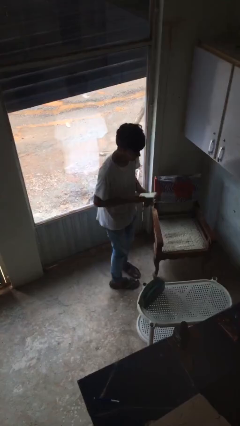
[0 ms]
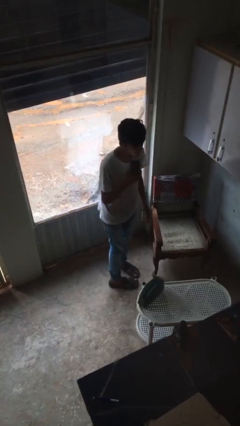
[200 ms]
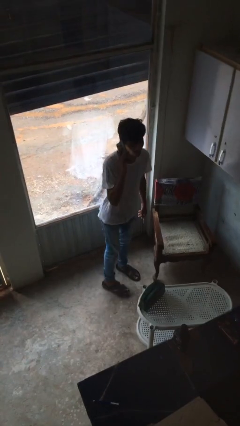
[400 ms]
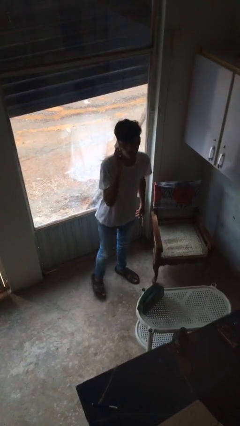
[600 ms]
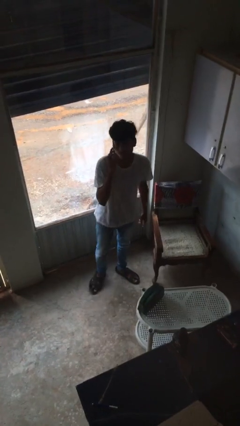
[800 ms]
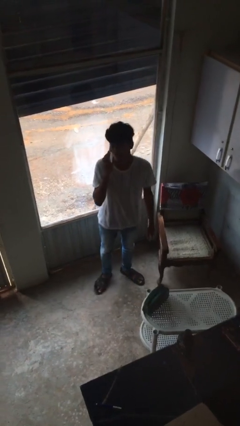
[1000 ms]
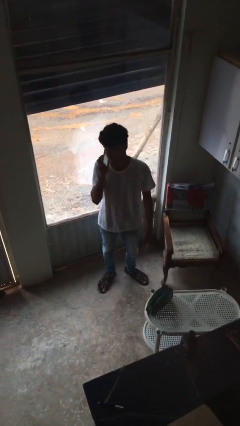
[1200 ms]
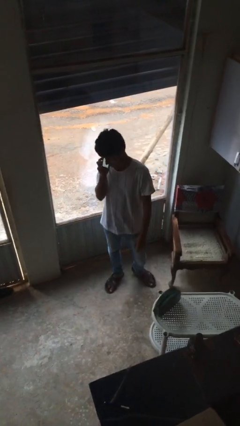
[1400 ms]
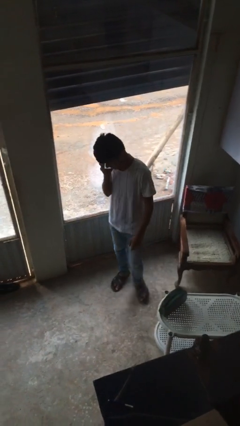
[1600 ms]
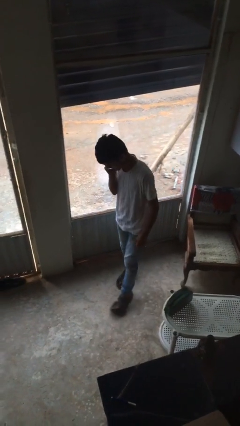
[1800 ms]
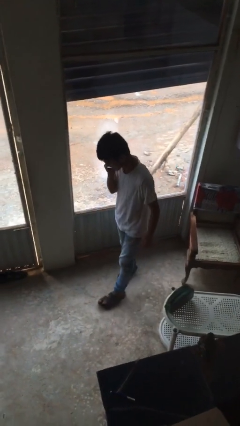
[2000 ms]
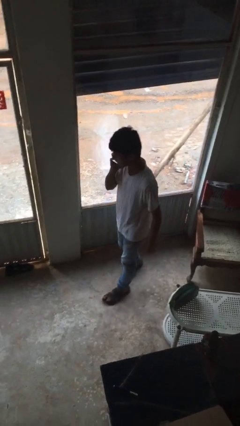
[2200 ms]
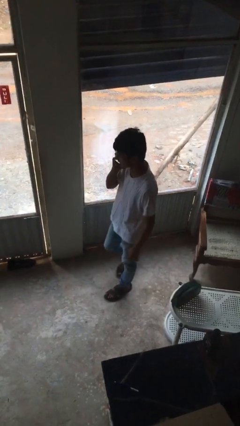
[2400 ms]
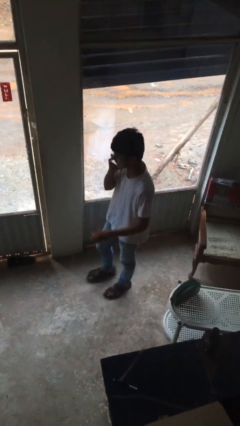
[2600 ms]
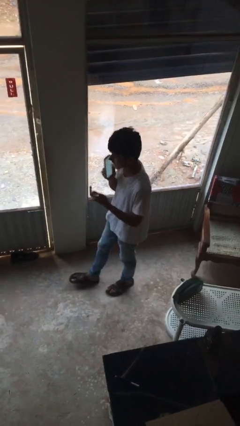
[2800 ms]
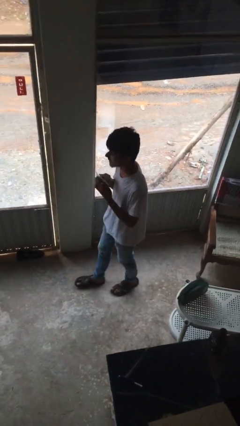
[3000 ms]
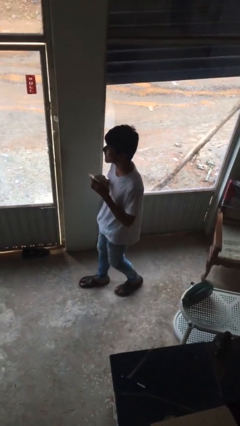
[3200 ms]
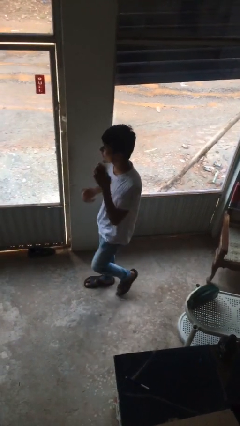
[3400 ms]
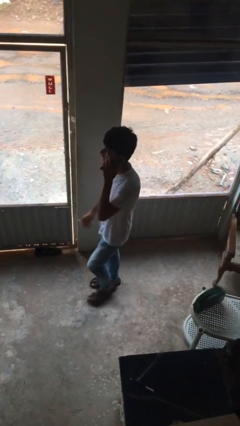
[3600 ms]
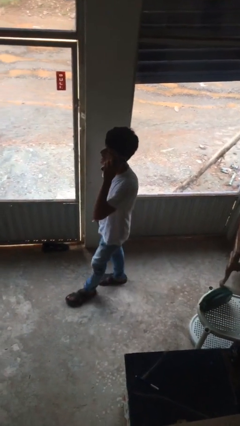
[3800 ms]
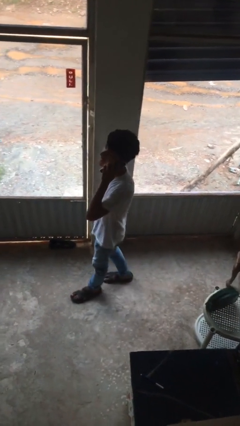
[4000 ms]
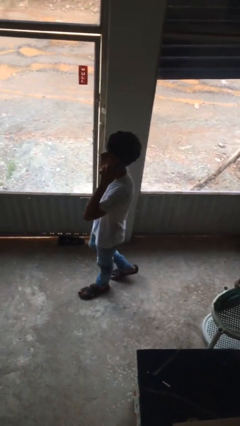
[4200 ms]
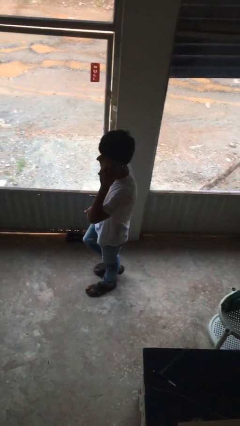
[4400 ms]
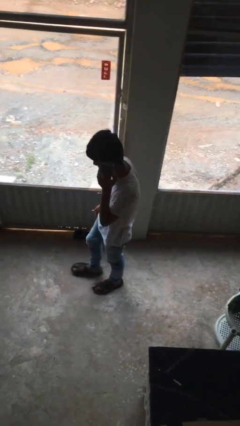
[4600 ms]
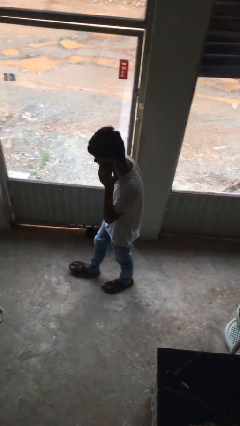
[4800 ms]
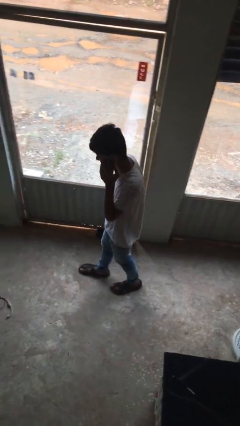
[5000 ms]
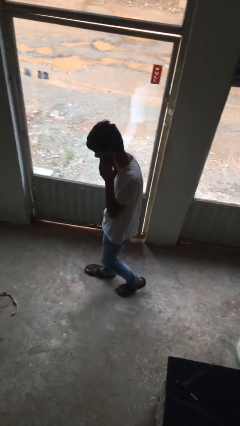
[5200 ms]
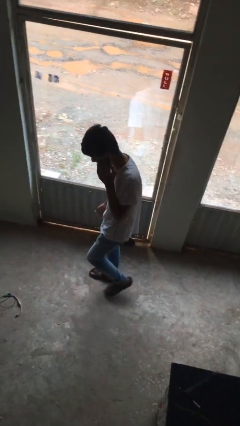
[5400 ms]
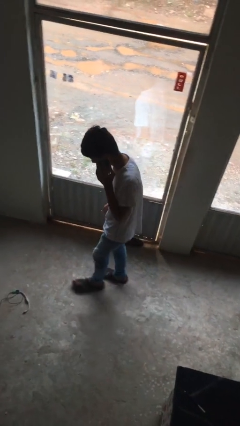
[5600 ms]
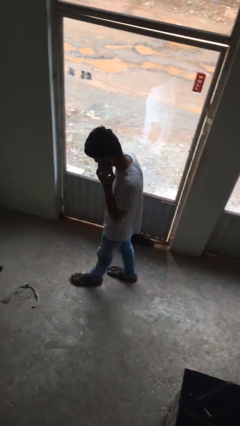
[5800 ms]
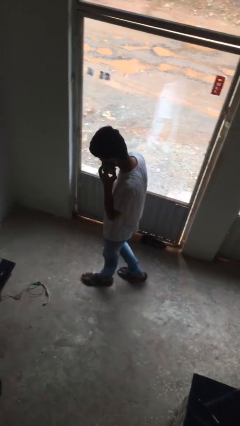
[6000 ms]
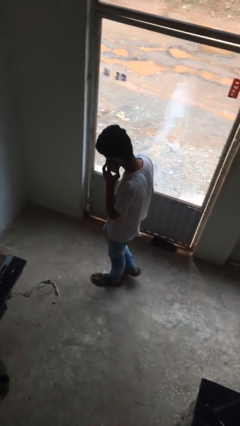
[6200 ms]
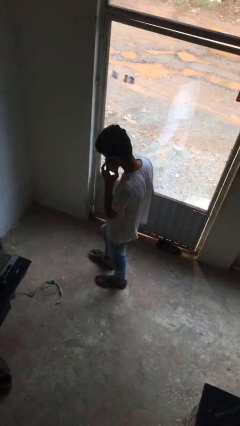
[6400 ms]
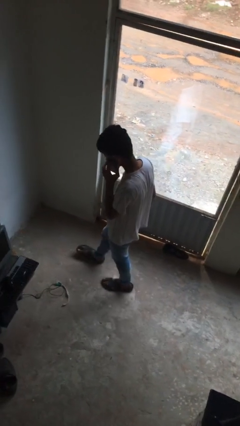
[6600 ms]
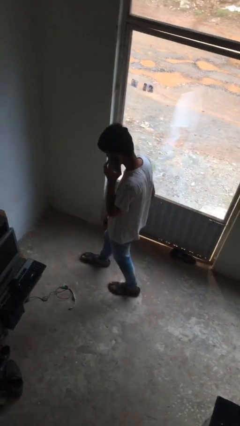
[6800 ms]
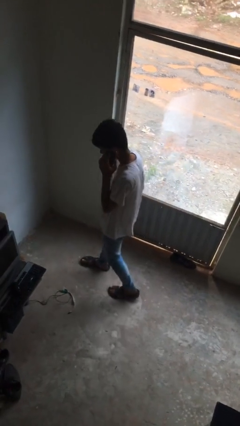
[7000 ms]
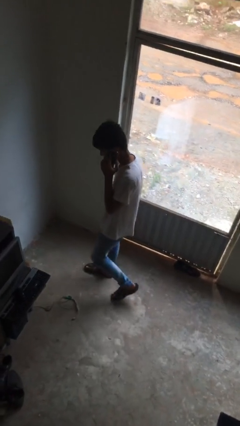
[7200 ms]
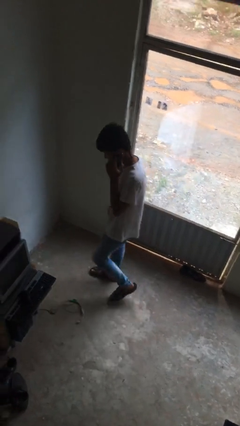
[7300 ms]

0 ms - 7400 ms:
person talks on phone

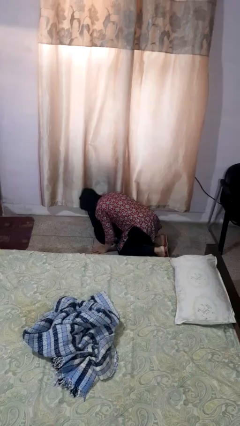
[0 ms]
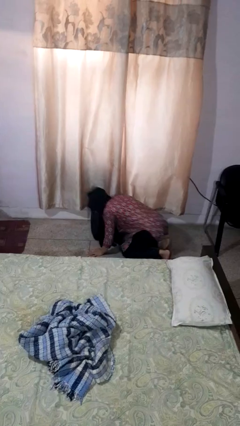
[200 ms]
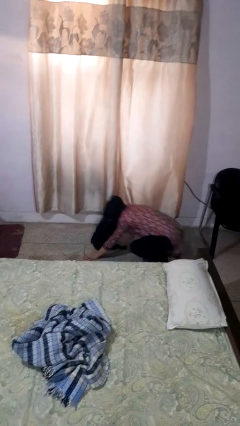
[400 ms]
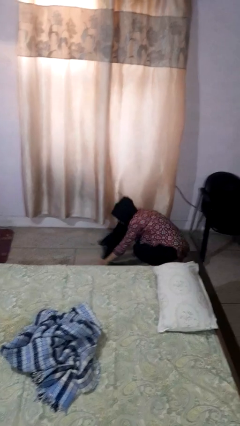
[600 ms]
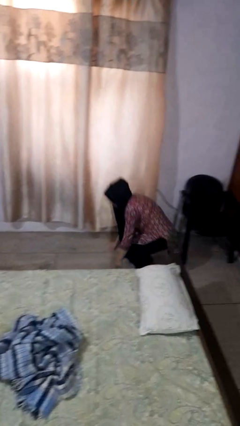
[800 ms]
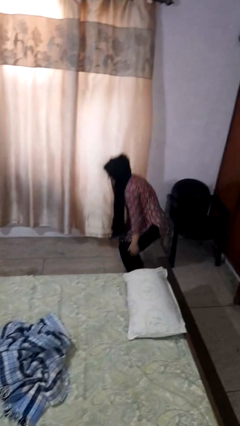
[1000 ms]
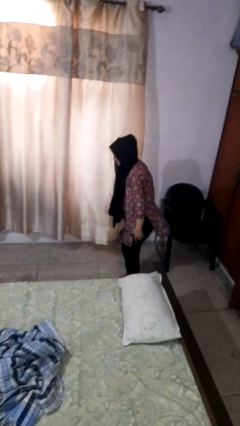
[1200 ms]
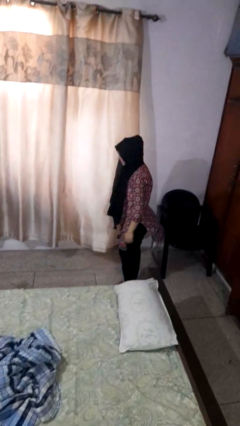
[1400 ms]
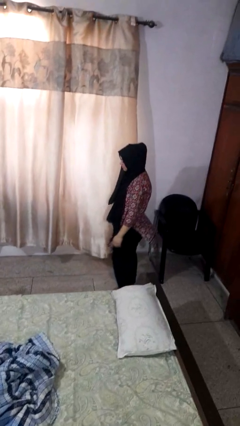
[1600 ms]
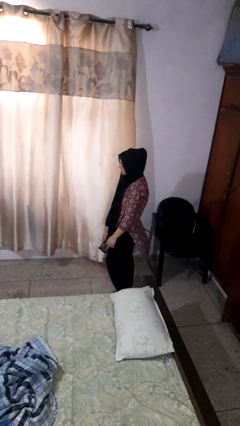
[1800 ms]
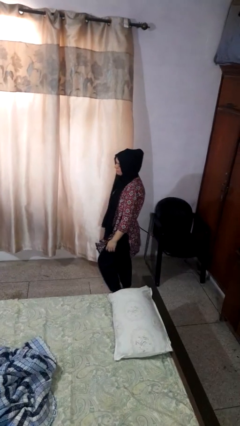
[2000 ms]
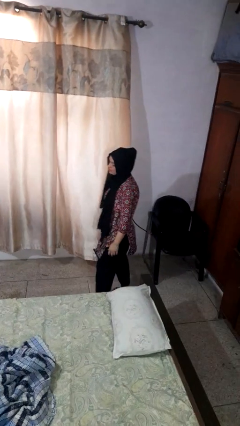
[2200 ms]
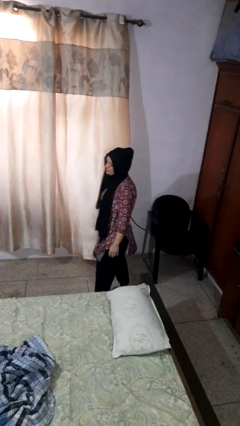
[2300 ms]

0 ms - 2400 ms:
person stands up from floor

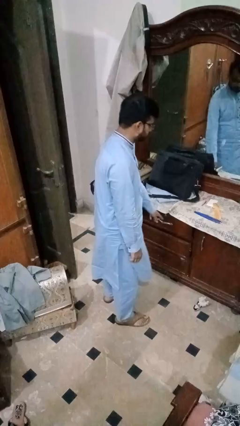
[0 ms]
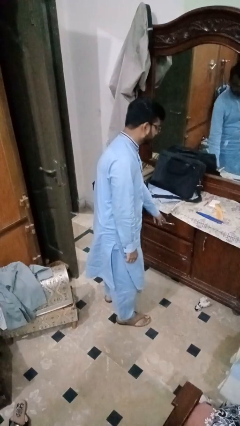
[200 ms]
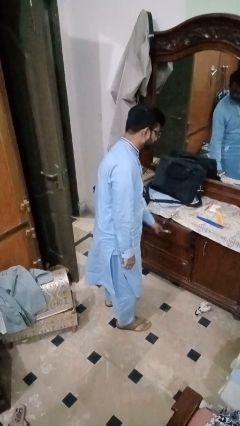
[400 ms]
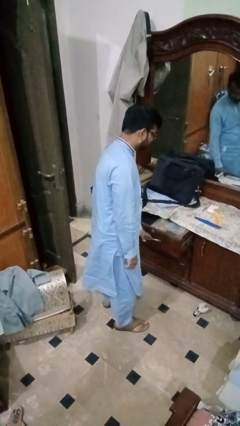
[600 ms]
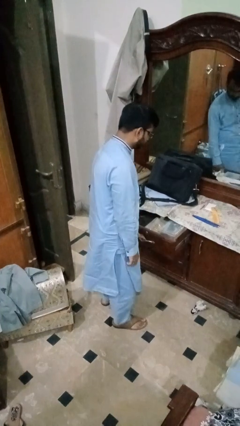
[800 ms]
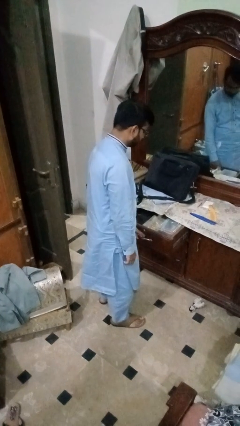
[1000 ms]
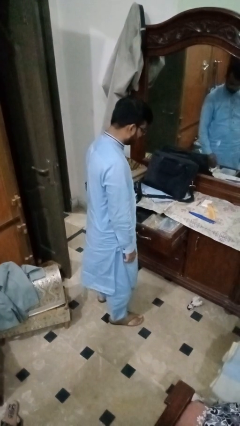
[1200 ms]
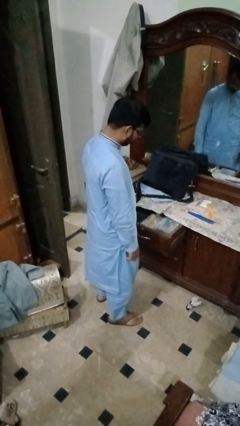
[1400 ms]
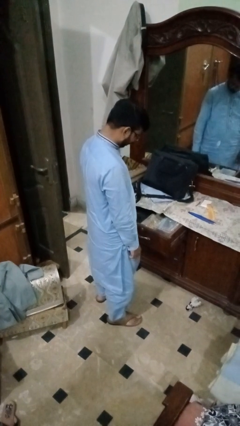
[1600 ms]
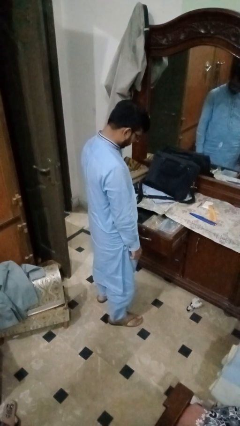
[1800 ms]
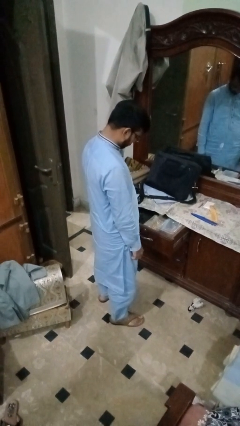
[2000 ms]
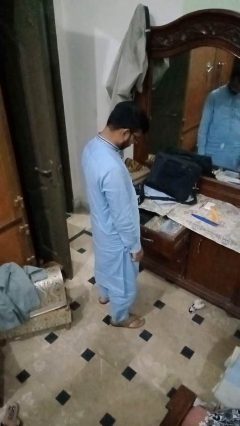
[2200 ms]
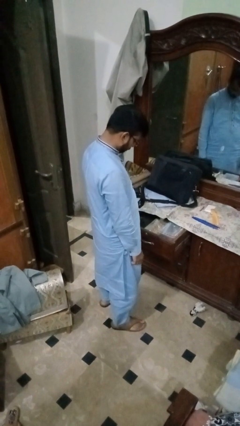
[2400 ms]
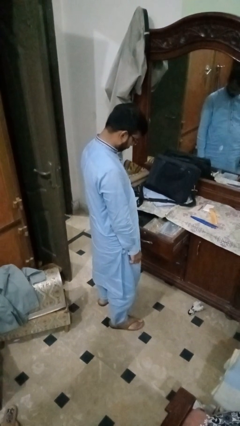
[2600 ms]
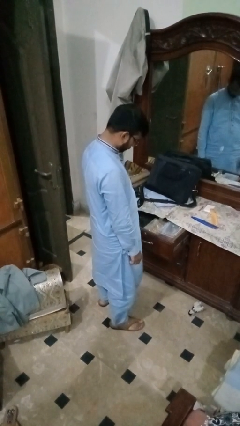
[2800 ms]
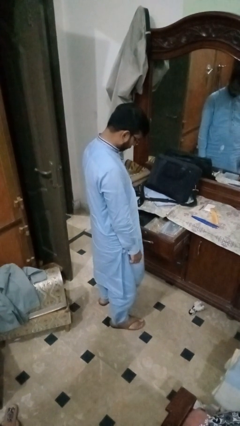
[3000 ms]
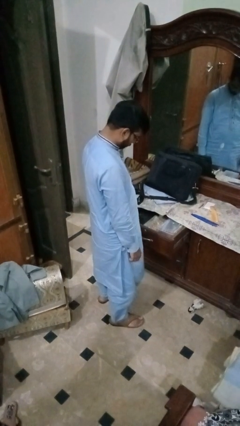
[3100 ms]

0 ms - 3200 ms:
person opens dresser drawer

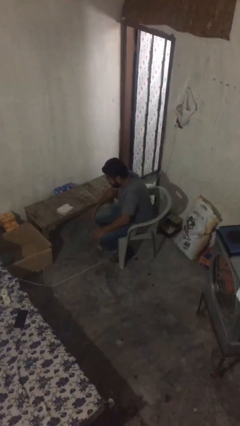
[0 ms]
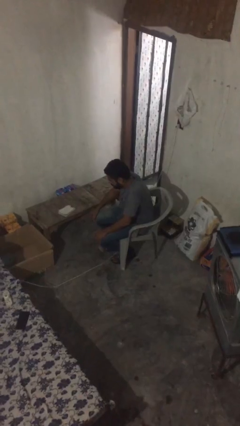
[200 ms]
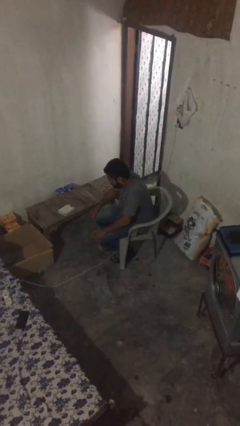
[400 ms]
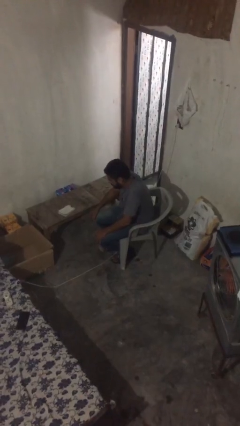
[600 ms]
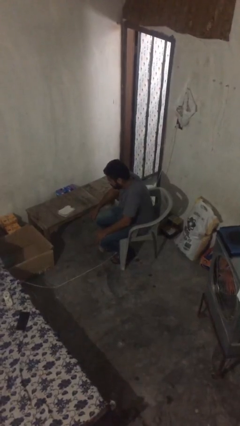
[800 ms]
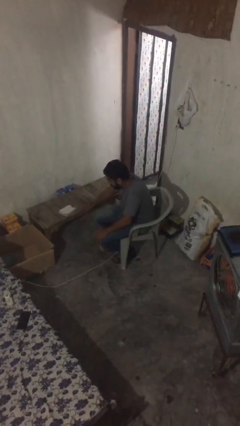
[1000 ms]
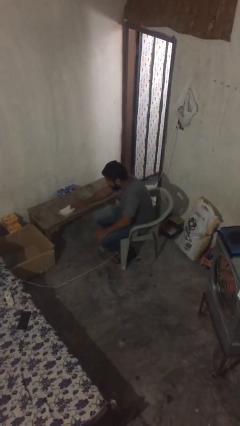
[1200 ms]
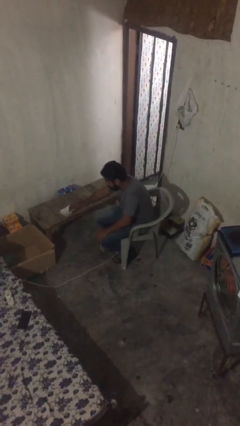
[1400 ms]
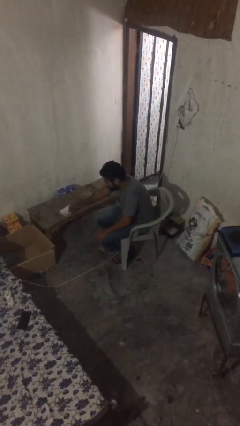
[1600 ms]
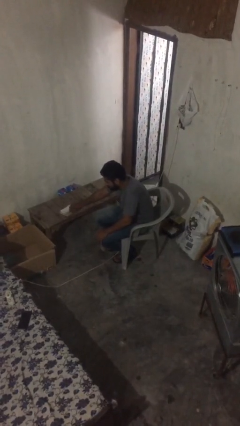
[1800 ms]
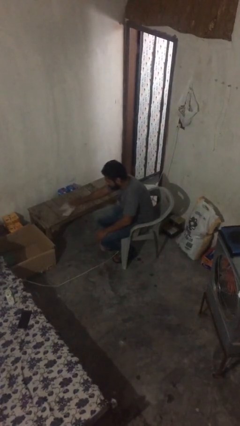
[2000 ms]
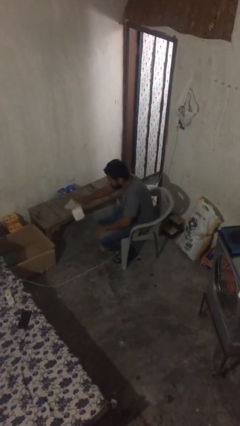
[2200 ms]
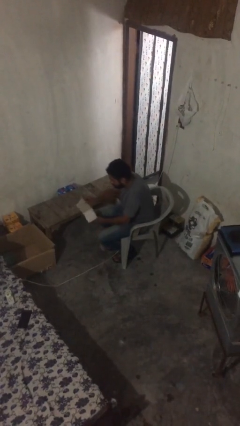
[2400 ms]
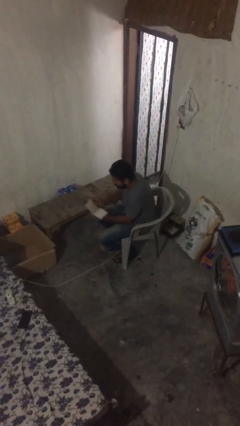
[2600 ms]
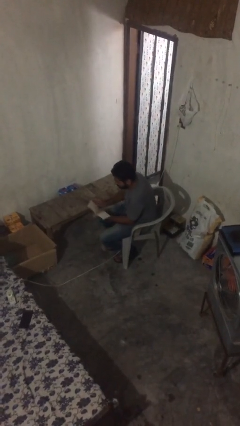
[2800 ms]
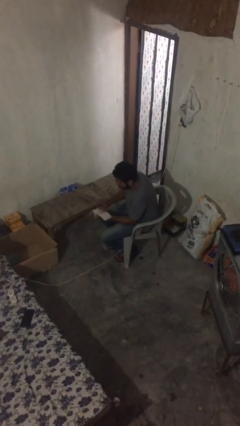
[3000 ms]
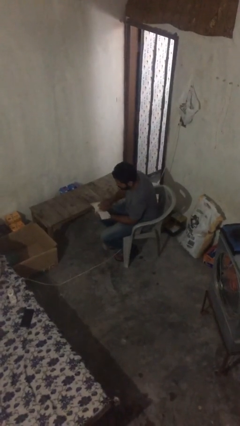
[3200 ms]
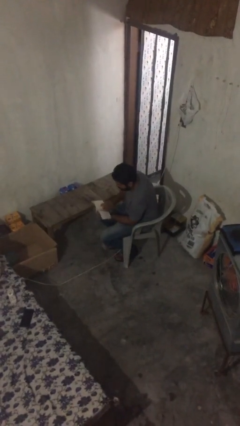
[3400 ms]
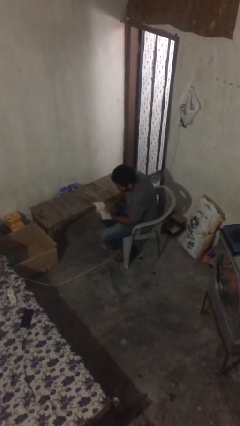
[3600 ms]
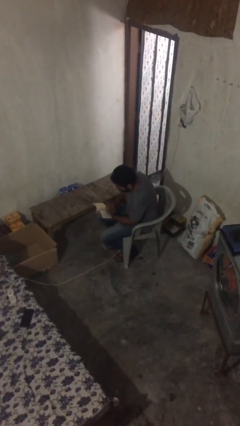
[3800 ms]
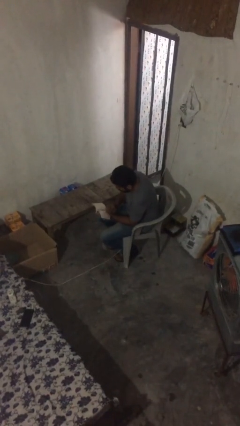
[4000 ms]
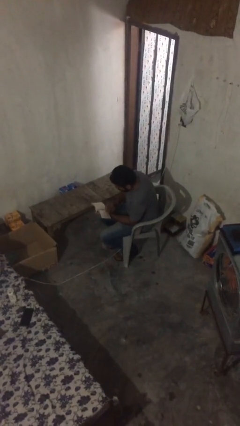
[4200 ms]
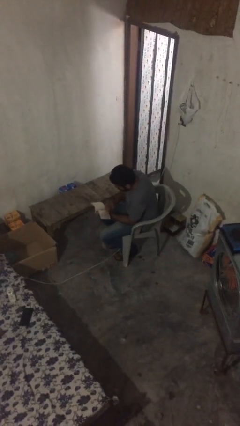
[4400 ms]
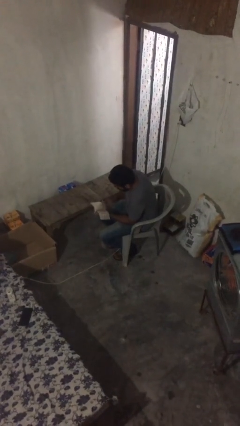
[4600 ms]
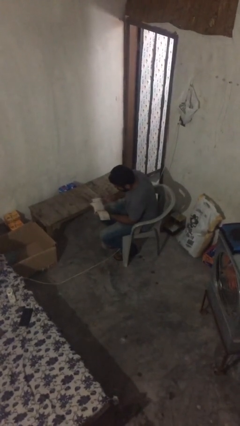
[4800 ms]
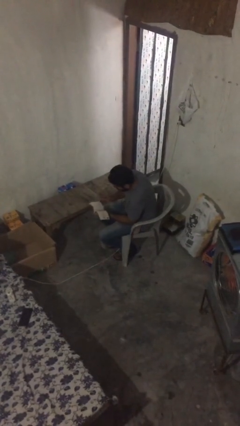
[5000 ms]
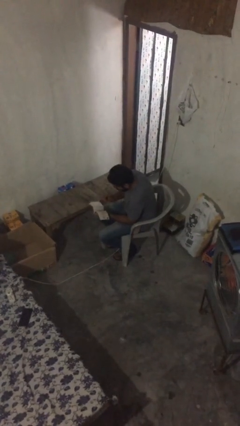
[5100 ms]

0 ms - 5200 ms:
person reads document
